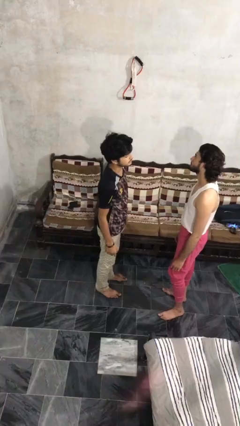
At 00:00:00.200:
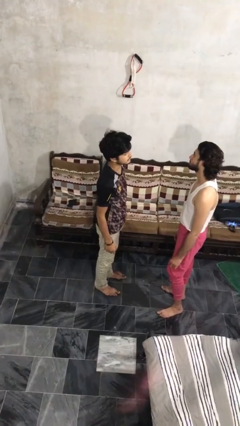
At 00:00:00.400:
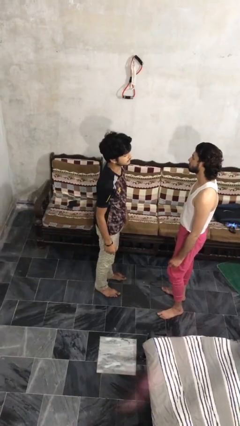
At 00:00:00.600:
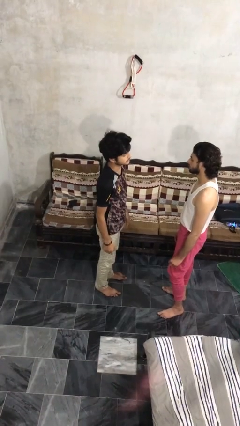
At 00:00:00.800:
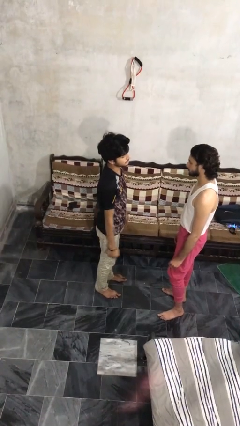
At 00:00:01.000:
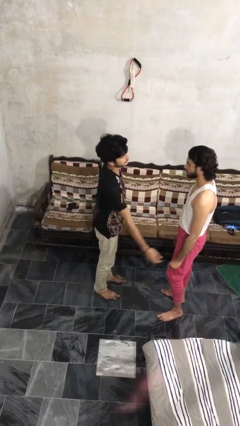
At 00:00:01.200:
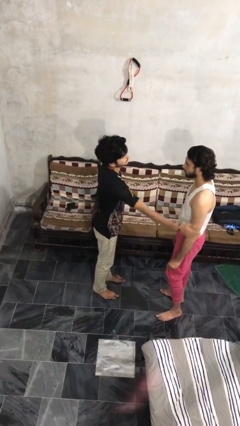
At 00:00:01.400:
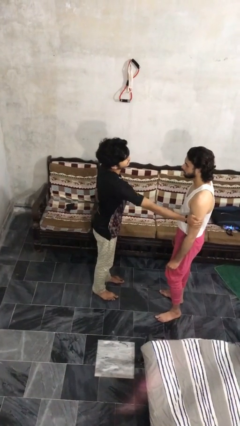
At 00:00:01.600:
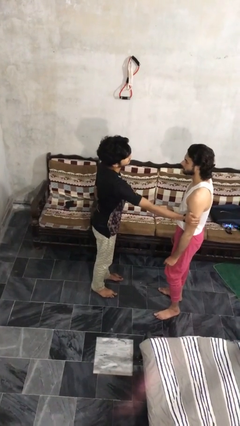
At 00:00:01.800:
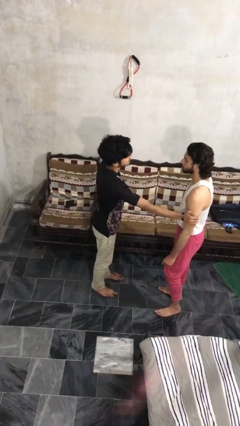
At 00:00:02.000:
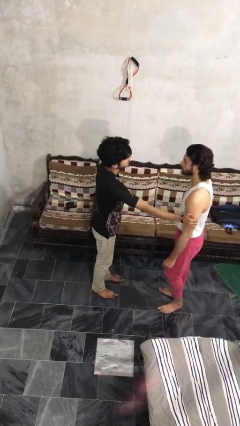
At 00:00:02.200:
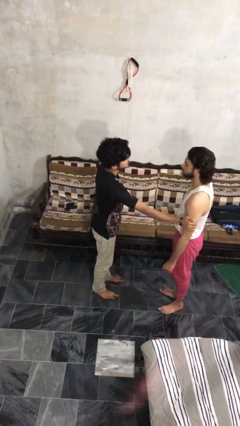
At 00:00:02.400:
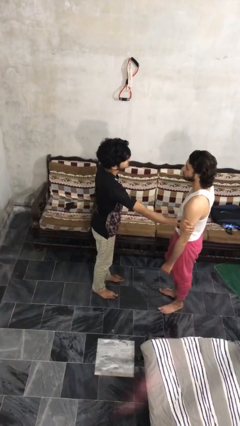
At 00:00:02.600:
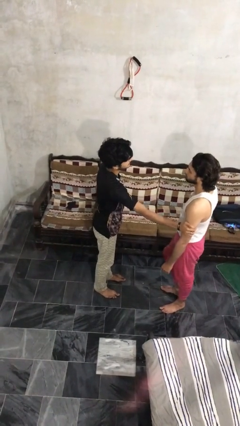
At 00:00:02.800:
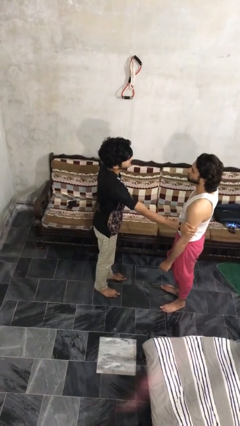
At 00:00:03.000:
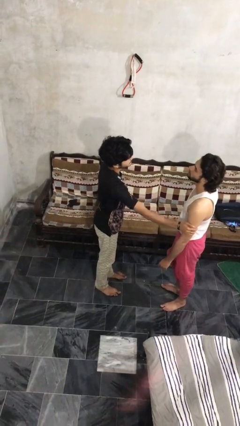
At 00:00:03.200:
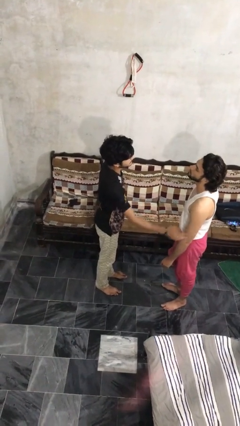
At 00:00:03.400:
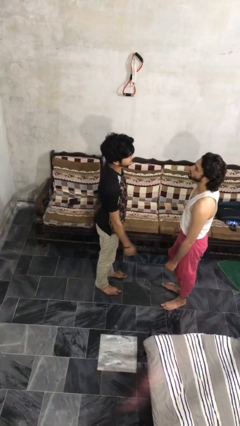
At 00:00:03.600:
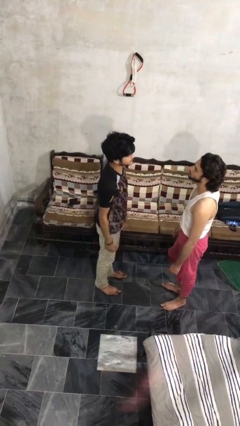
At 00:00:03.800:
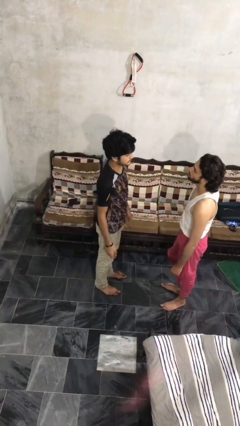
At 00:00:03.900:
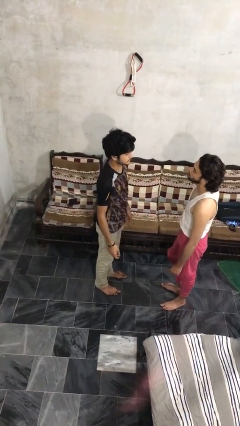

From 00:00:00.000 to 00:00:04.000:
person grabs person by bicep

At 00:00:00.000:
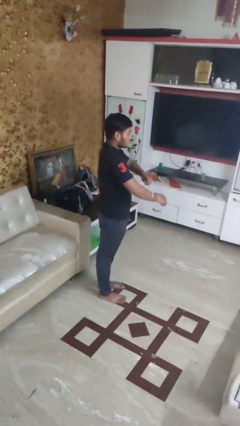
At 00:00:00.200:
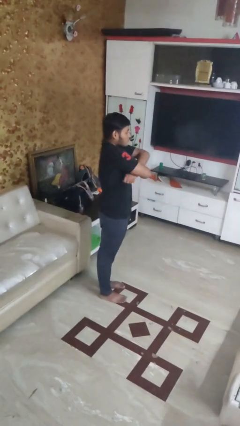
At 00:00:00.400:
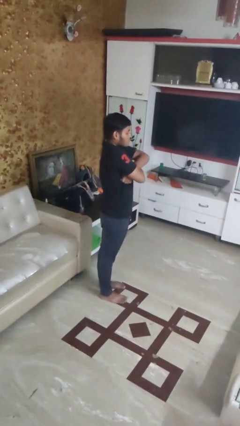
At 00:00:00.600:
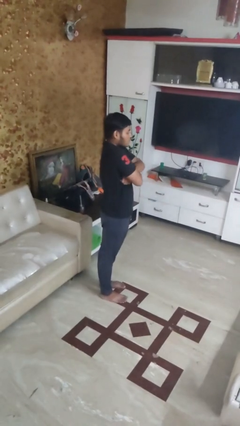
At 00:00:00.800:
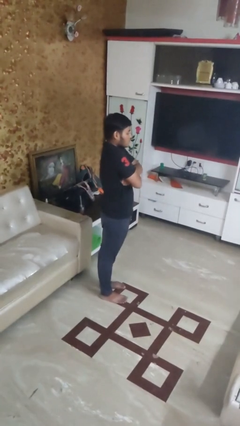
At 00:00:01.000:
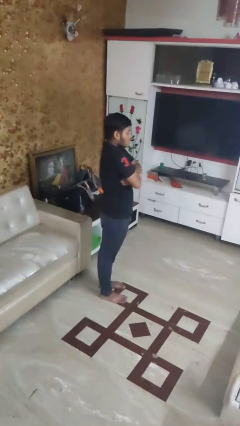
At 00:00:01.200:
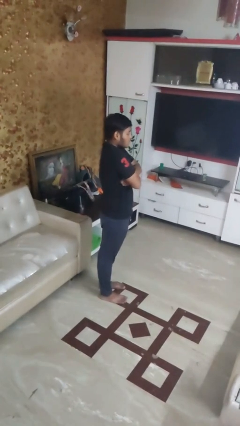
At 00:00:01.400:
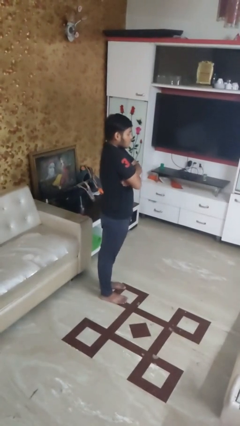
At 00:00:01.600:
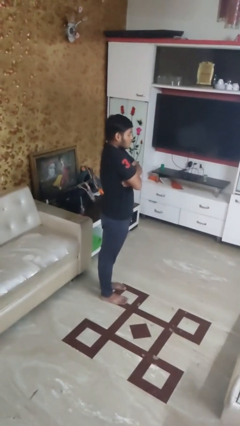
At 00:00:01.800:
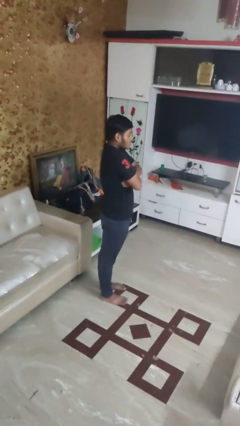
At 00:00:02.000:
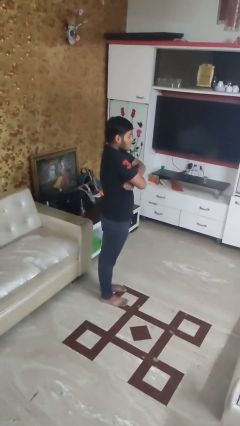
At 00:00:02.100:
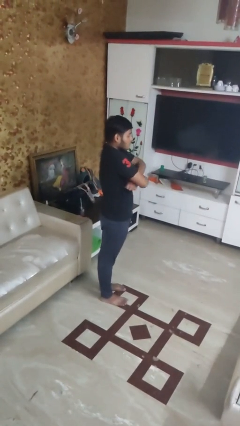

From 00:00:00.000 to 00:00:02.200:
person crosses arms

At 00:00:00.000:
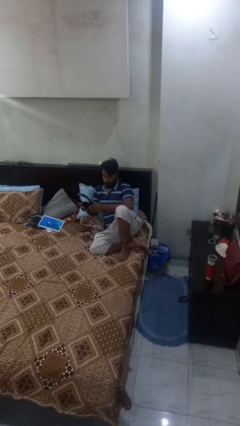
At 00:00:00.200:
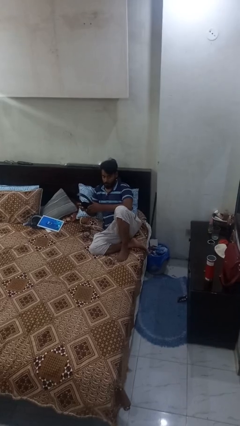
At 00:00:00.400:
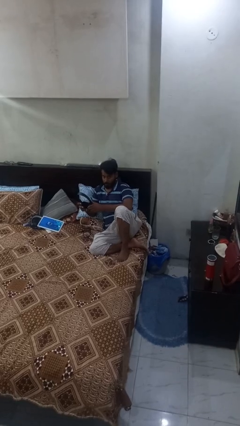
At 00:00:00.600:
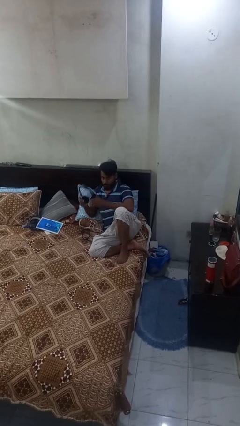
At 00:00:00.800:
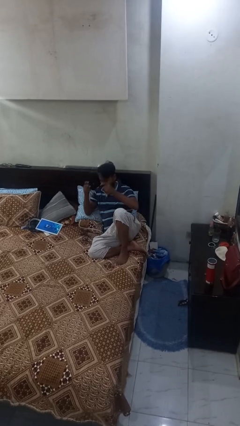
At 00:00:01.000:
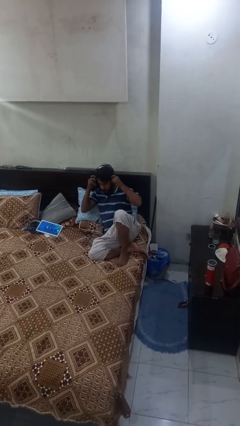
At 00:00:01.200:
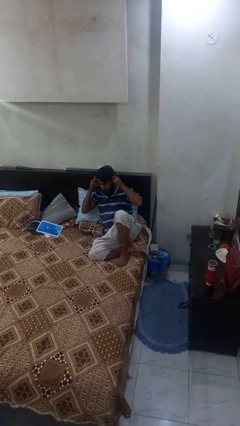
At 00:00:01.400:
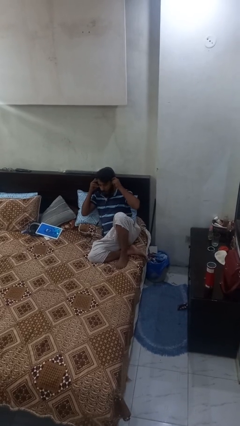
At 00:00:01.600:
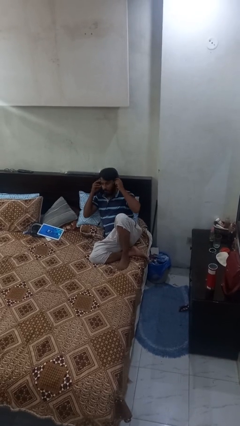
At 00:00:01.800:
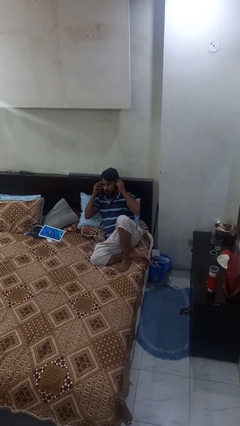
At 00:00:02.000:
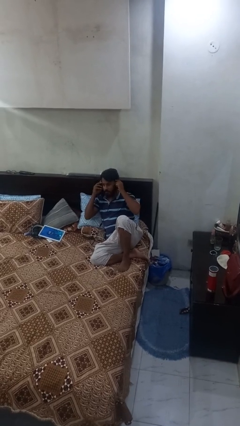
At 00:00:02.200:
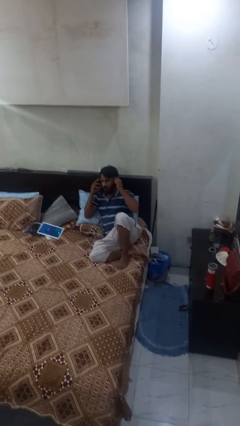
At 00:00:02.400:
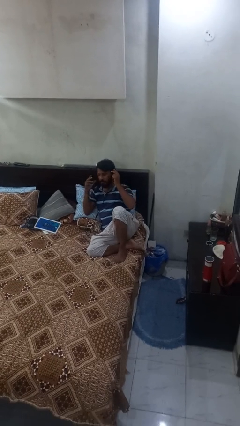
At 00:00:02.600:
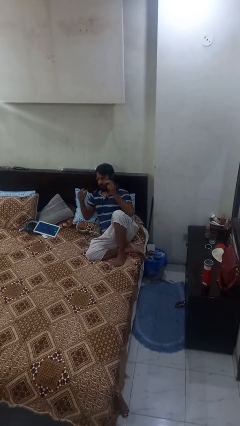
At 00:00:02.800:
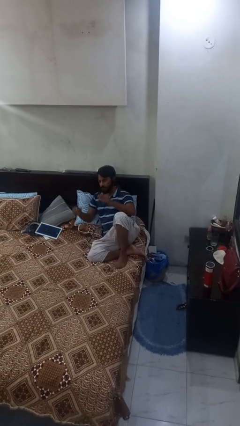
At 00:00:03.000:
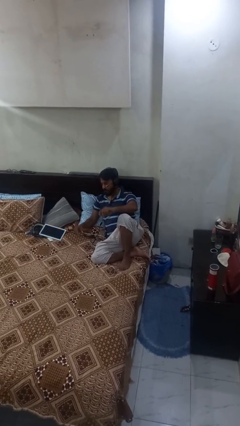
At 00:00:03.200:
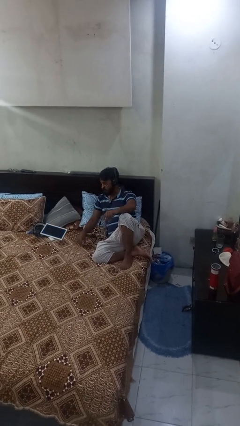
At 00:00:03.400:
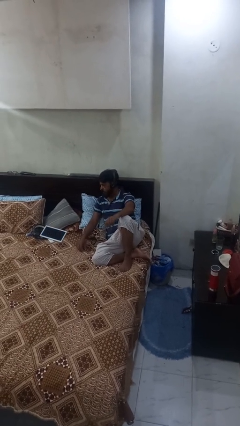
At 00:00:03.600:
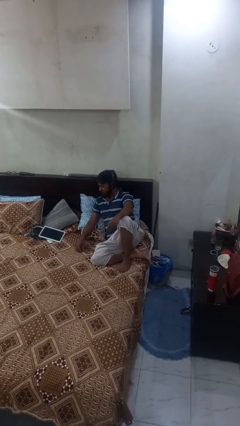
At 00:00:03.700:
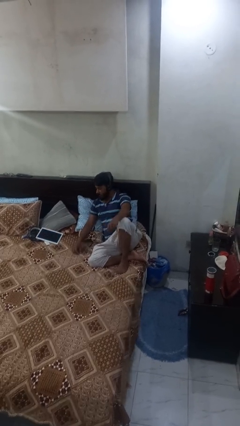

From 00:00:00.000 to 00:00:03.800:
person puts on headphones

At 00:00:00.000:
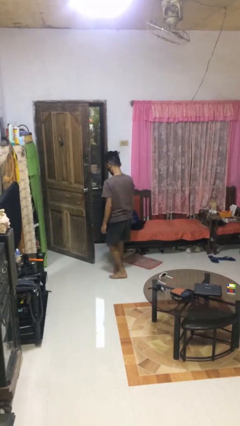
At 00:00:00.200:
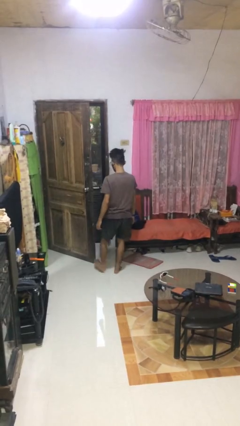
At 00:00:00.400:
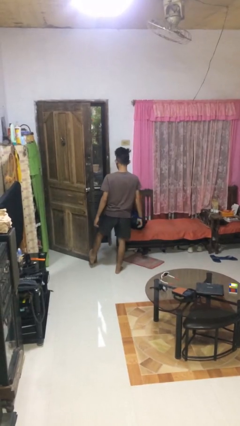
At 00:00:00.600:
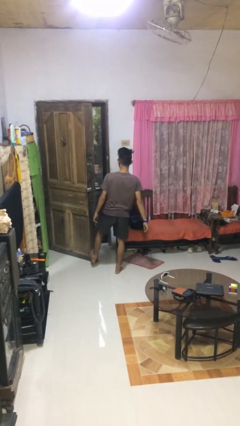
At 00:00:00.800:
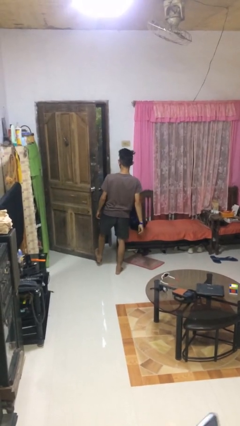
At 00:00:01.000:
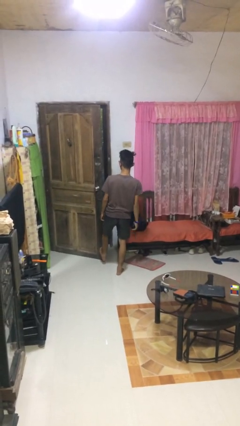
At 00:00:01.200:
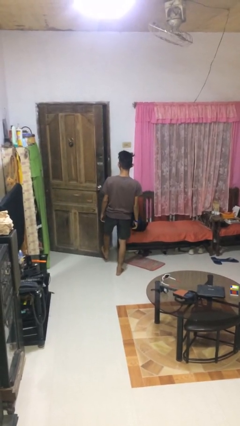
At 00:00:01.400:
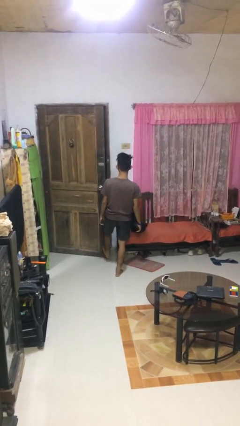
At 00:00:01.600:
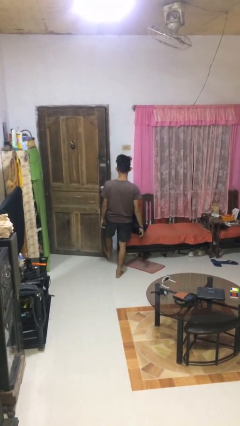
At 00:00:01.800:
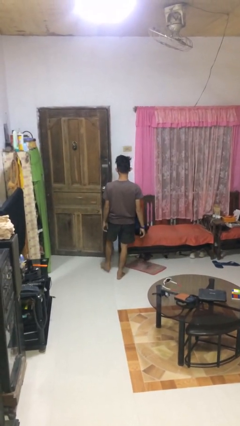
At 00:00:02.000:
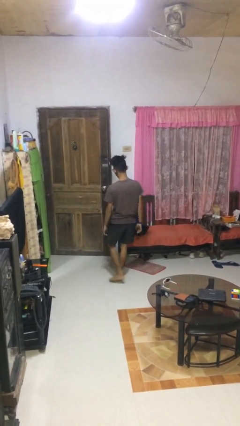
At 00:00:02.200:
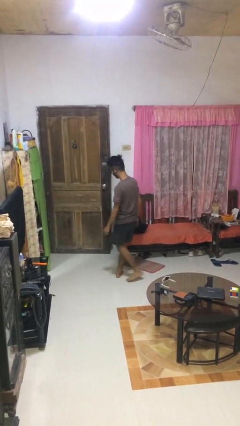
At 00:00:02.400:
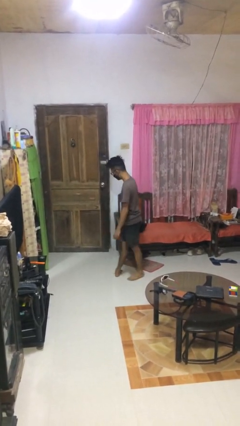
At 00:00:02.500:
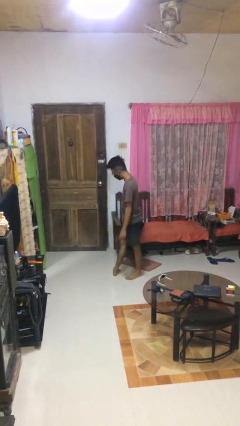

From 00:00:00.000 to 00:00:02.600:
person closes door with foot

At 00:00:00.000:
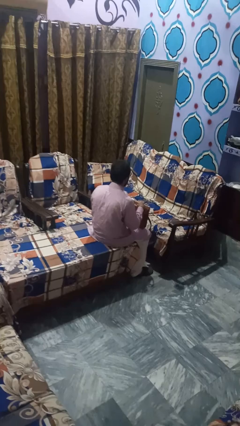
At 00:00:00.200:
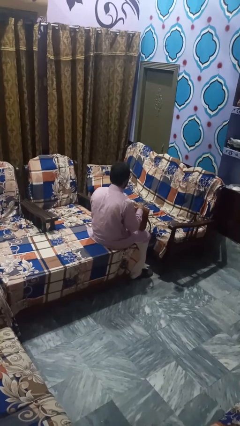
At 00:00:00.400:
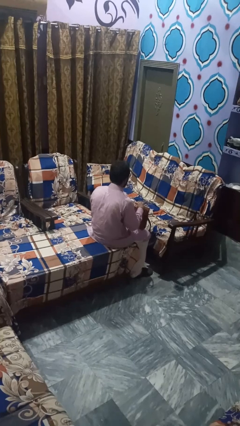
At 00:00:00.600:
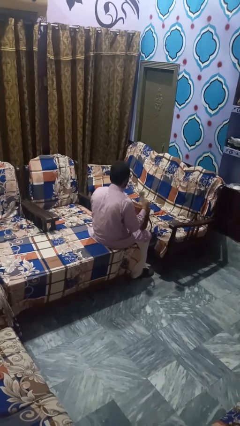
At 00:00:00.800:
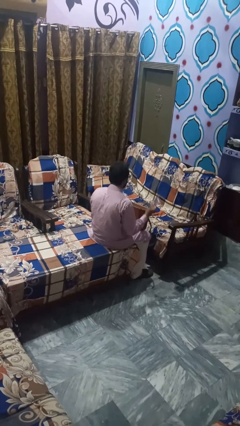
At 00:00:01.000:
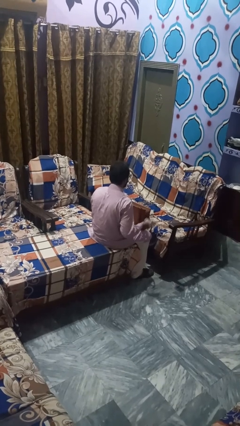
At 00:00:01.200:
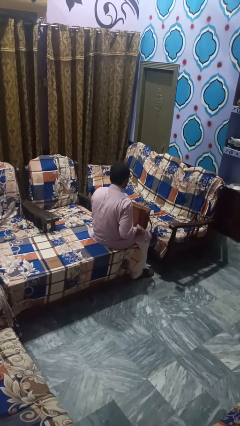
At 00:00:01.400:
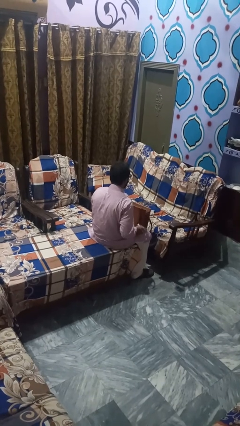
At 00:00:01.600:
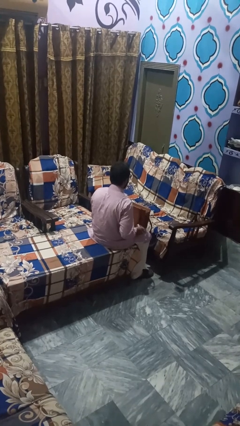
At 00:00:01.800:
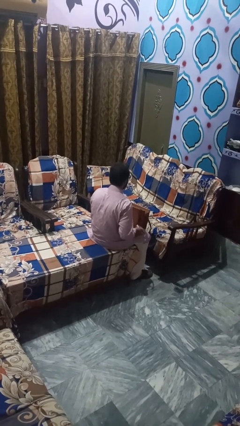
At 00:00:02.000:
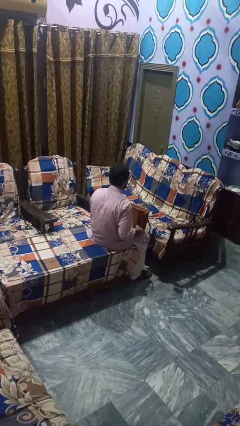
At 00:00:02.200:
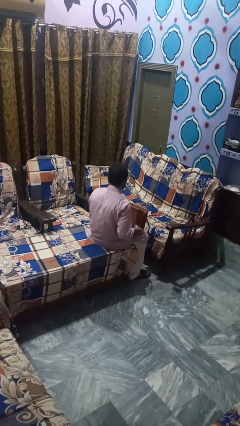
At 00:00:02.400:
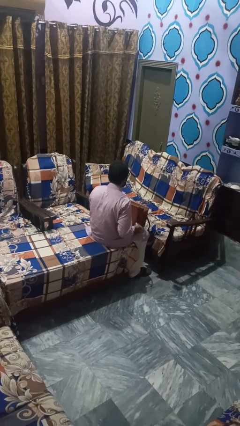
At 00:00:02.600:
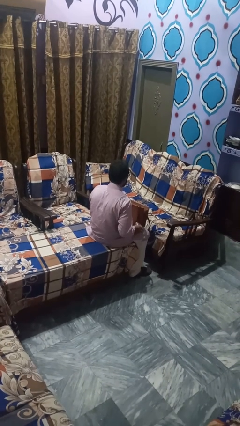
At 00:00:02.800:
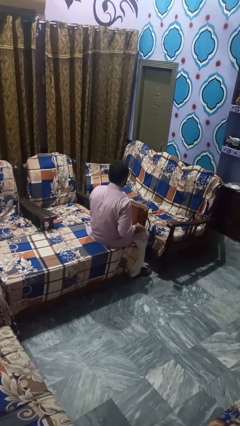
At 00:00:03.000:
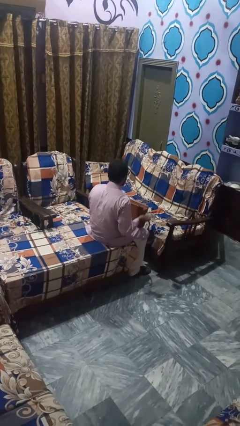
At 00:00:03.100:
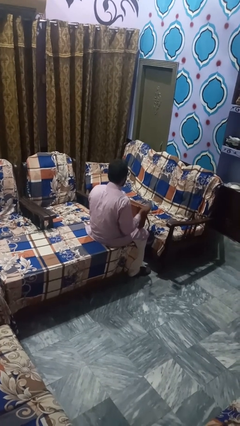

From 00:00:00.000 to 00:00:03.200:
person puts object into bag

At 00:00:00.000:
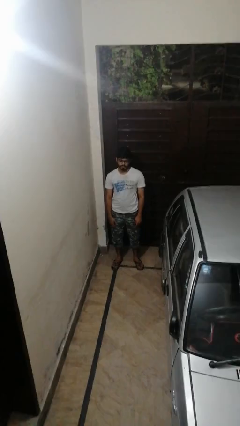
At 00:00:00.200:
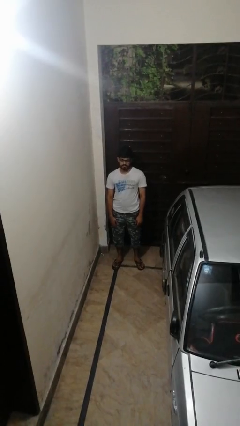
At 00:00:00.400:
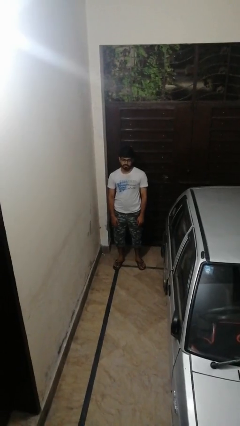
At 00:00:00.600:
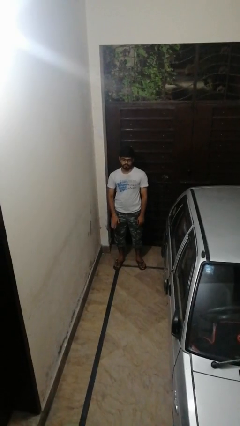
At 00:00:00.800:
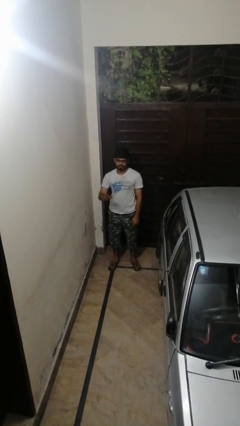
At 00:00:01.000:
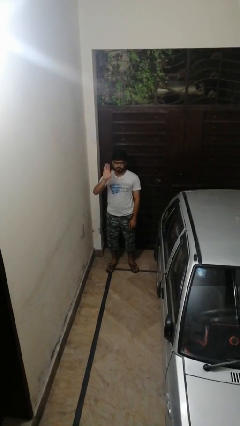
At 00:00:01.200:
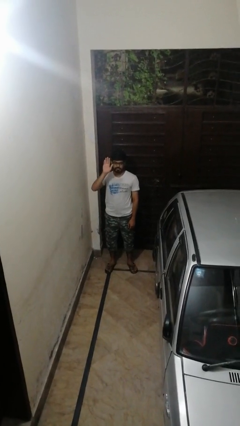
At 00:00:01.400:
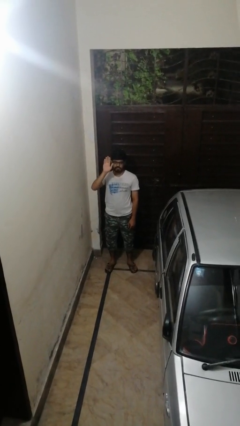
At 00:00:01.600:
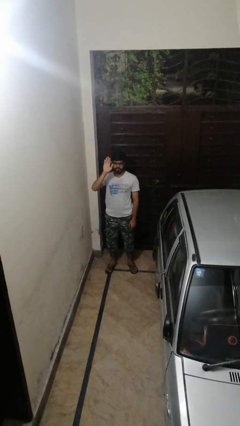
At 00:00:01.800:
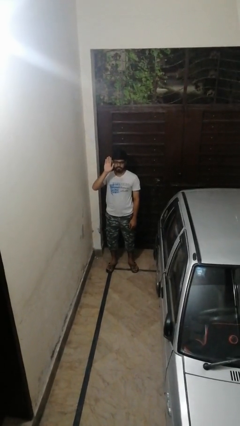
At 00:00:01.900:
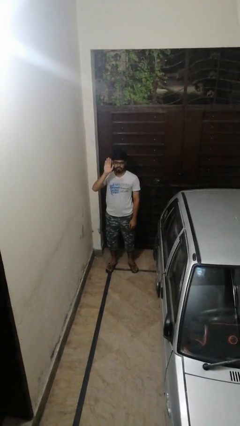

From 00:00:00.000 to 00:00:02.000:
person gestures raise hand
